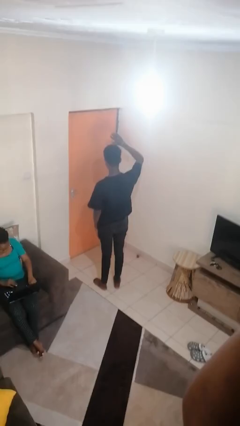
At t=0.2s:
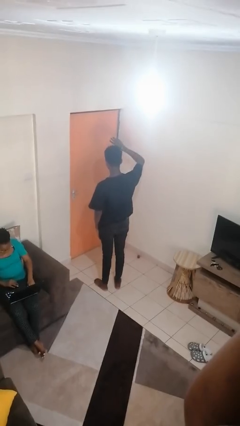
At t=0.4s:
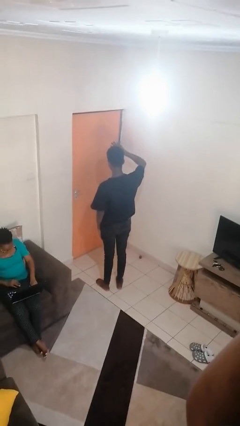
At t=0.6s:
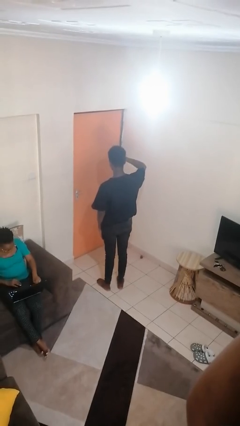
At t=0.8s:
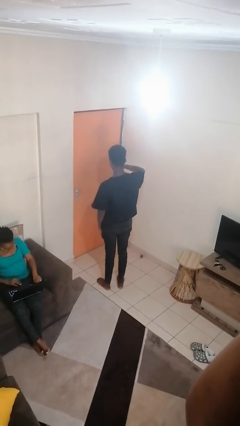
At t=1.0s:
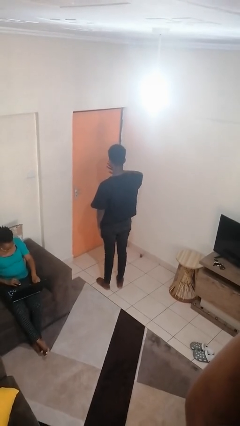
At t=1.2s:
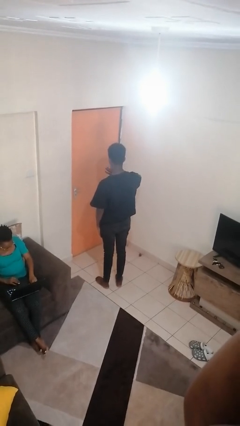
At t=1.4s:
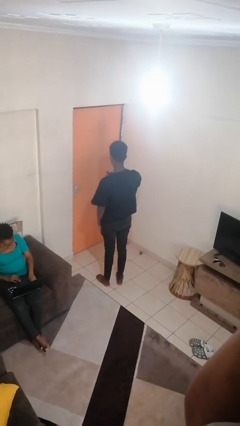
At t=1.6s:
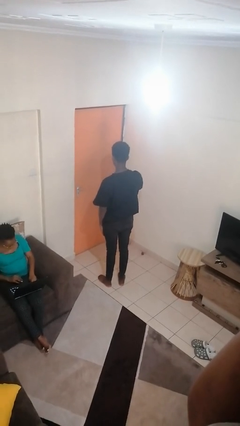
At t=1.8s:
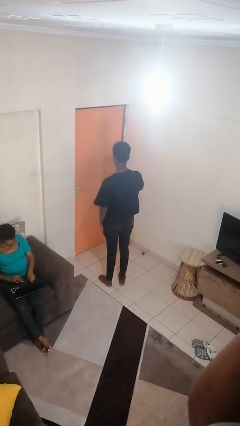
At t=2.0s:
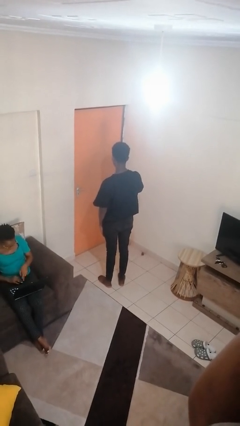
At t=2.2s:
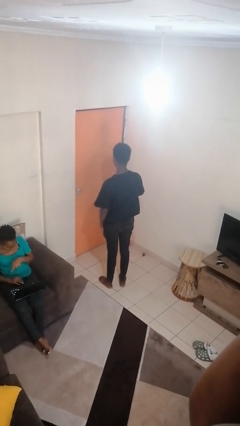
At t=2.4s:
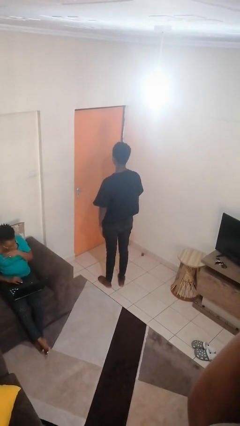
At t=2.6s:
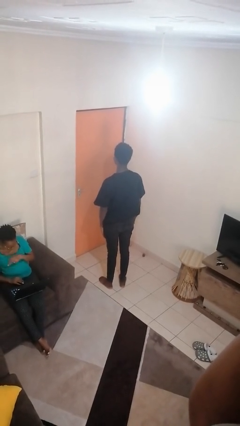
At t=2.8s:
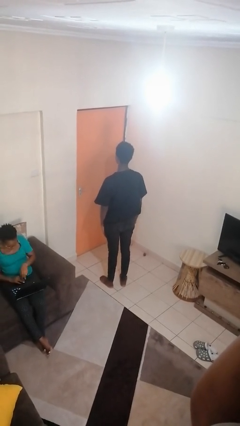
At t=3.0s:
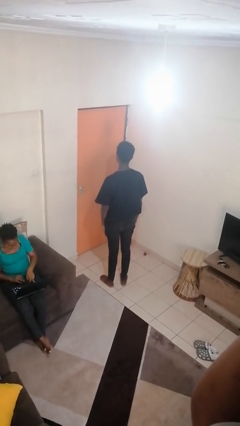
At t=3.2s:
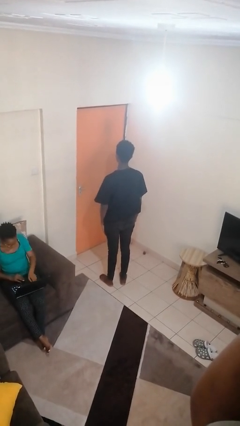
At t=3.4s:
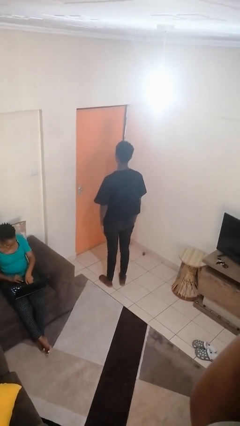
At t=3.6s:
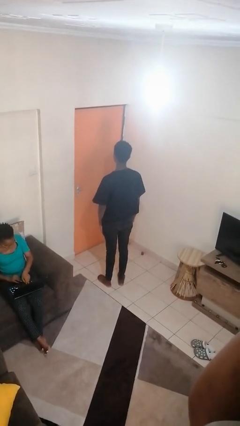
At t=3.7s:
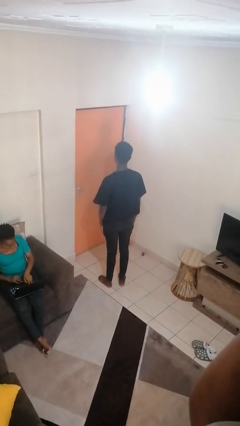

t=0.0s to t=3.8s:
person gestures swipe down

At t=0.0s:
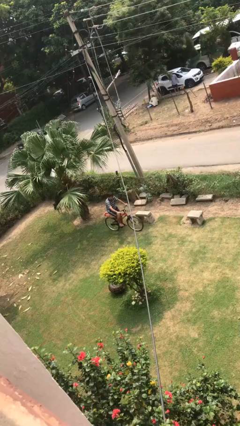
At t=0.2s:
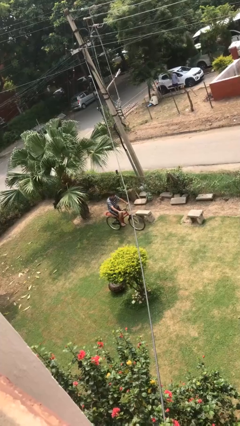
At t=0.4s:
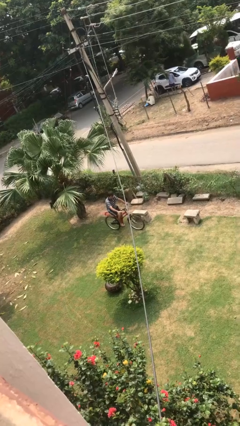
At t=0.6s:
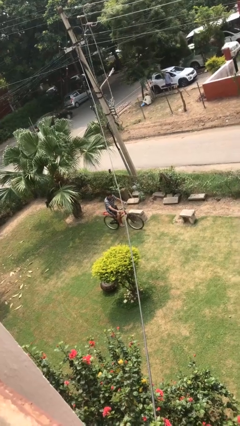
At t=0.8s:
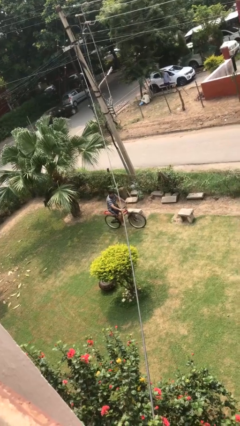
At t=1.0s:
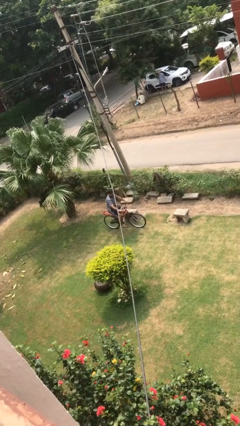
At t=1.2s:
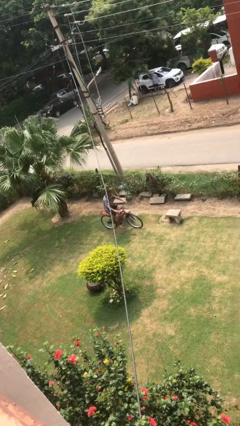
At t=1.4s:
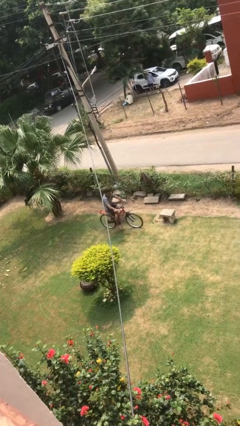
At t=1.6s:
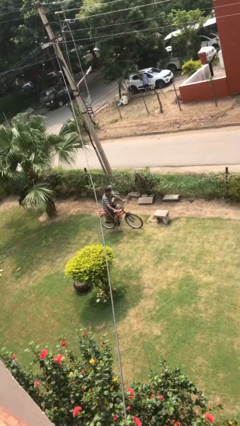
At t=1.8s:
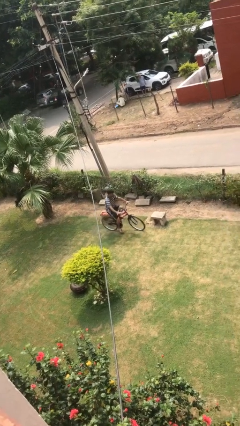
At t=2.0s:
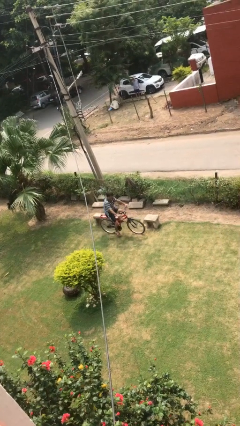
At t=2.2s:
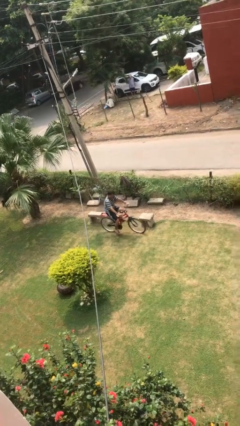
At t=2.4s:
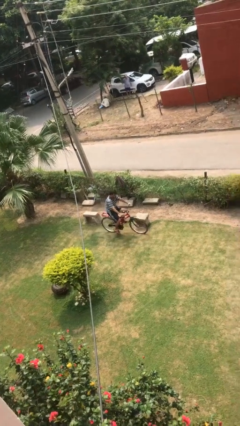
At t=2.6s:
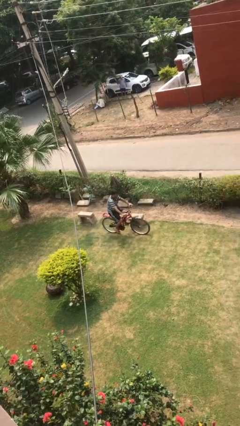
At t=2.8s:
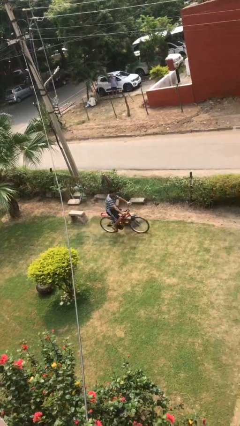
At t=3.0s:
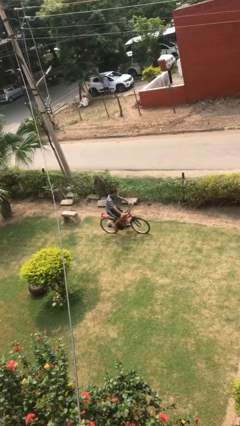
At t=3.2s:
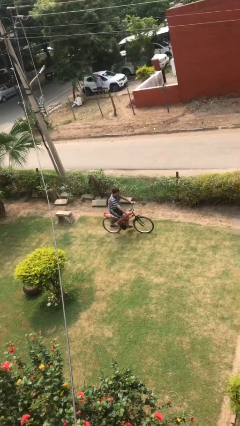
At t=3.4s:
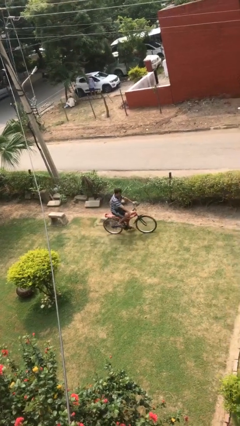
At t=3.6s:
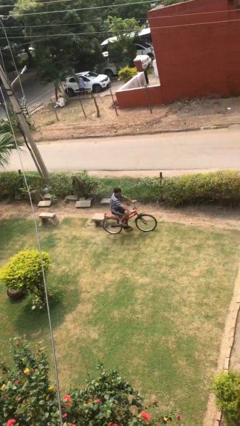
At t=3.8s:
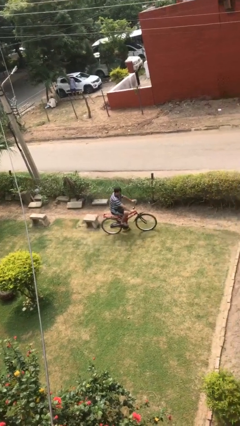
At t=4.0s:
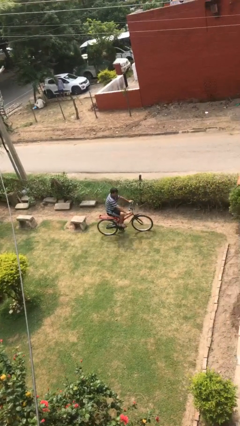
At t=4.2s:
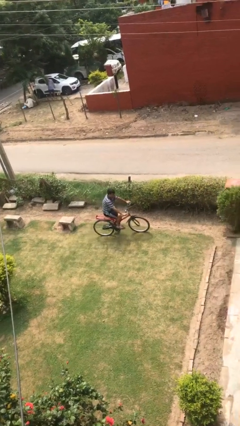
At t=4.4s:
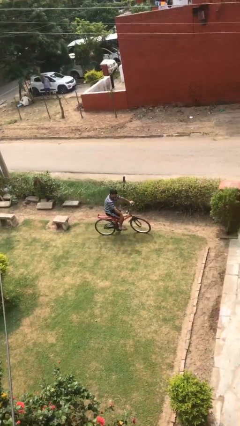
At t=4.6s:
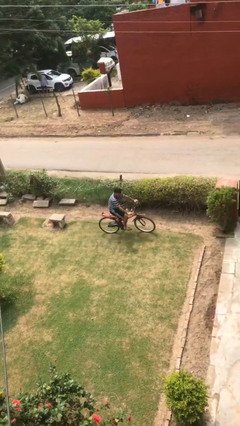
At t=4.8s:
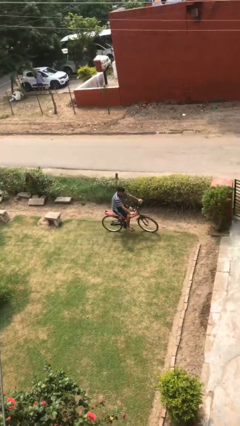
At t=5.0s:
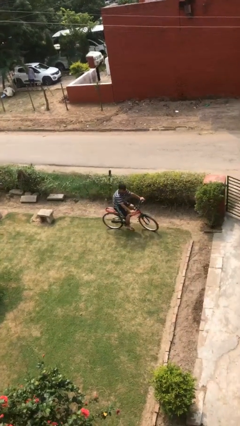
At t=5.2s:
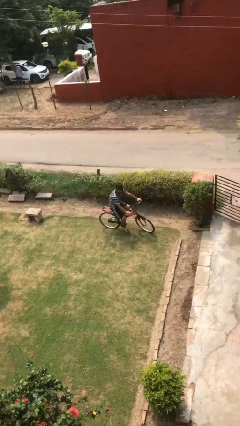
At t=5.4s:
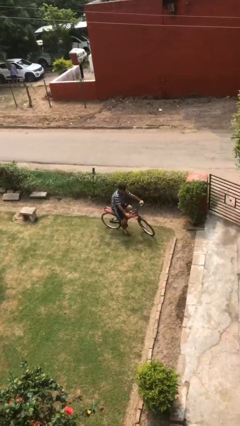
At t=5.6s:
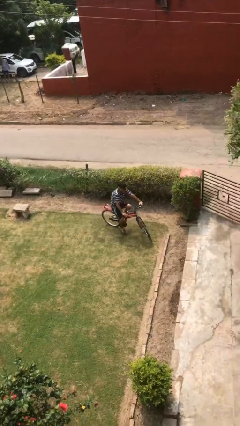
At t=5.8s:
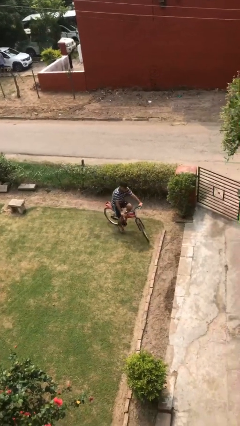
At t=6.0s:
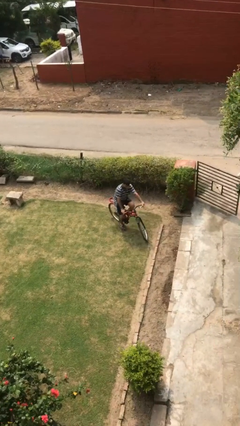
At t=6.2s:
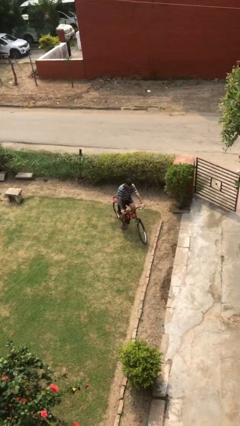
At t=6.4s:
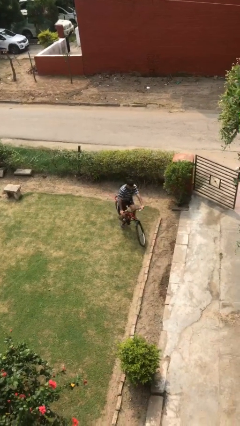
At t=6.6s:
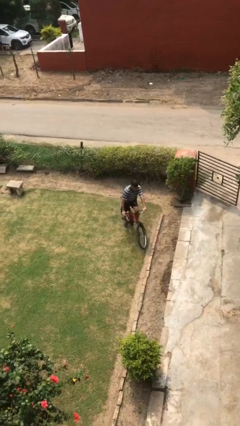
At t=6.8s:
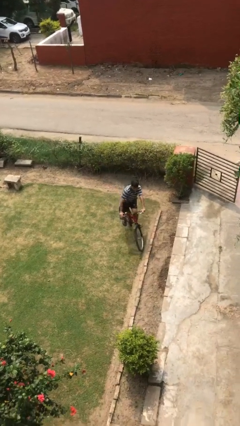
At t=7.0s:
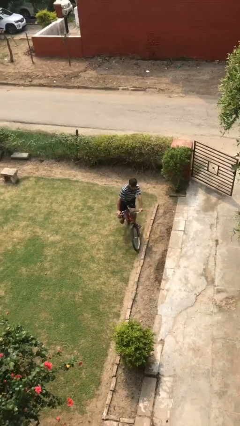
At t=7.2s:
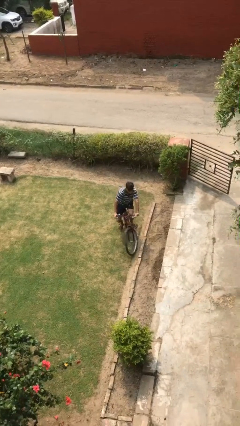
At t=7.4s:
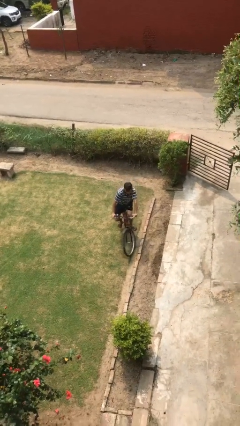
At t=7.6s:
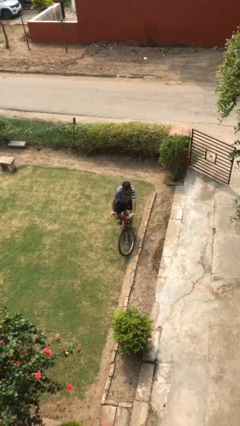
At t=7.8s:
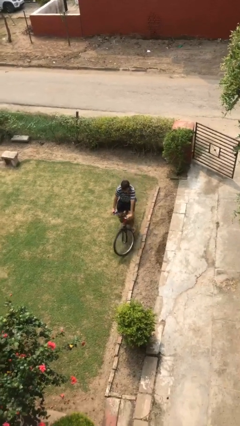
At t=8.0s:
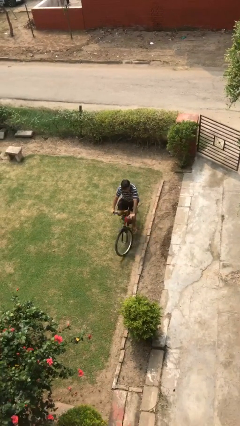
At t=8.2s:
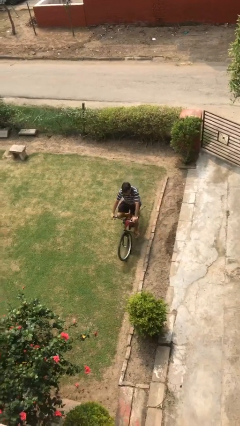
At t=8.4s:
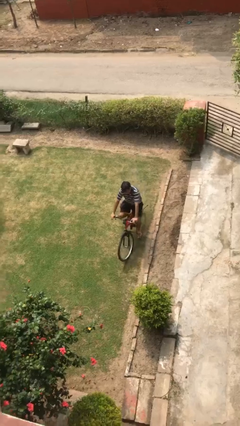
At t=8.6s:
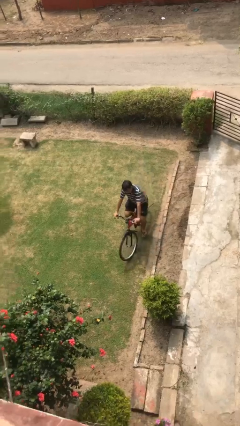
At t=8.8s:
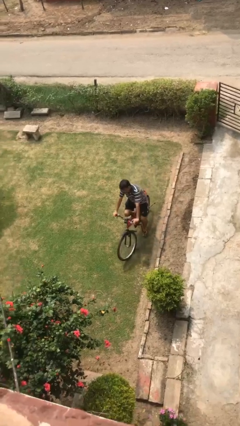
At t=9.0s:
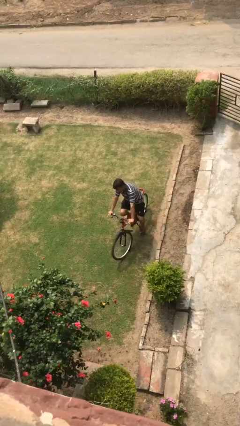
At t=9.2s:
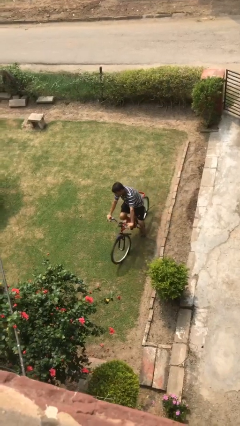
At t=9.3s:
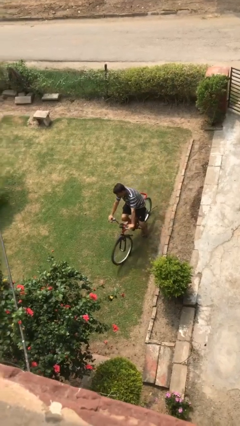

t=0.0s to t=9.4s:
person rides bicycle

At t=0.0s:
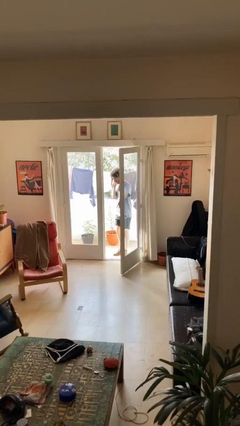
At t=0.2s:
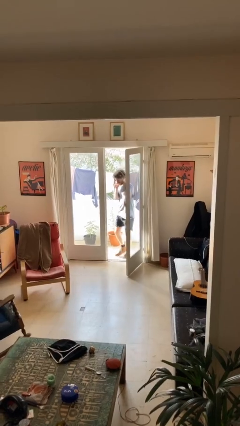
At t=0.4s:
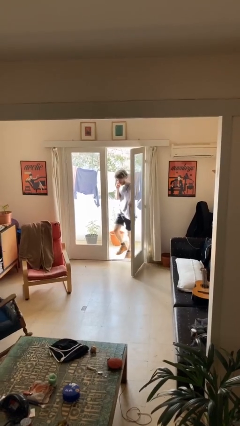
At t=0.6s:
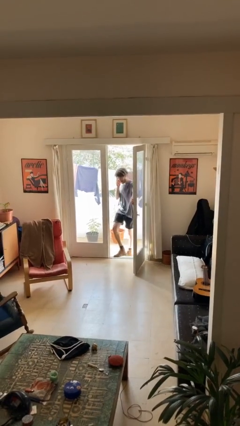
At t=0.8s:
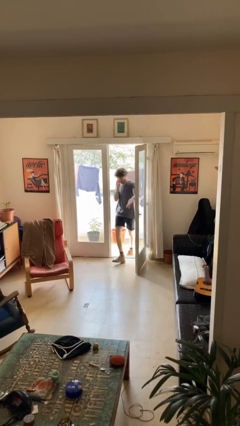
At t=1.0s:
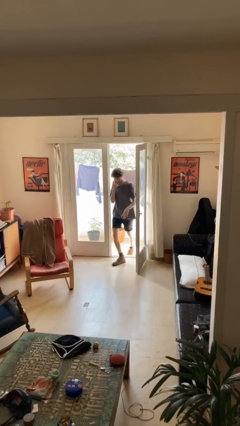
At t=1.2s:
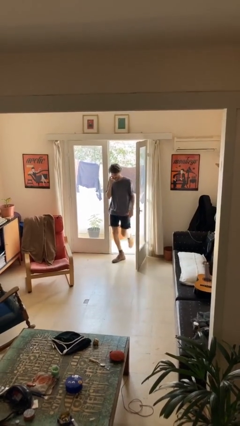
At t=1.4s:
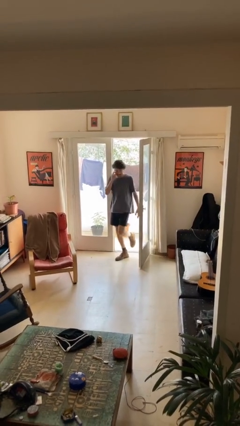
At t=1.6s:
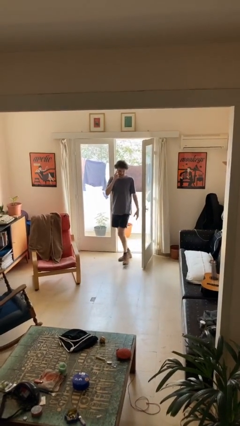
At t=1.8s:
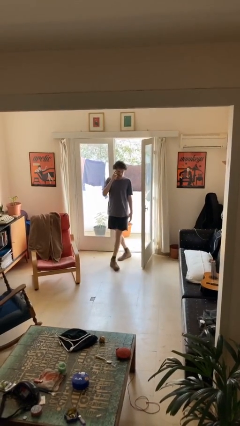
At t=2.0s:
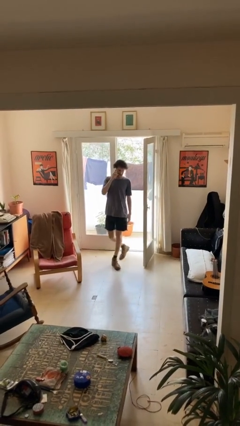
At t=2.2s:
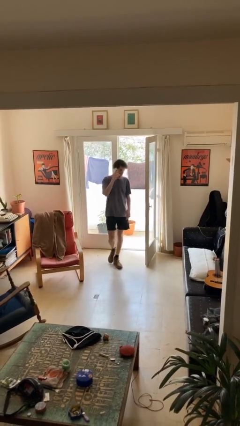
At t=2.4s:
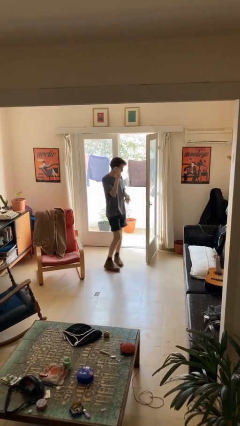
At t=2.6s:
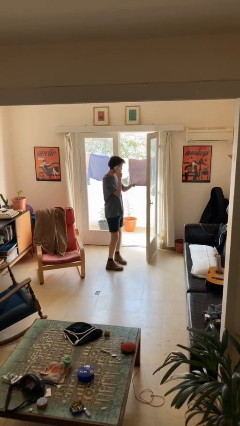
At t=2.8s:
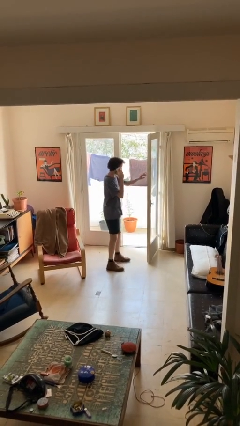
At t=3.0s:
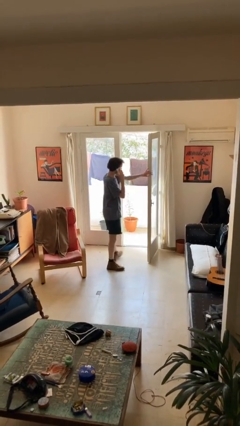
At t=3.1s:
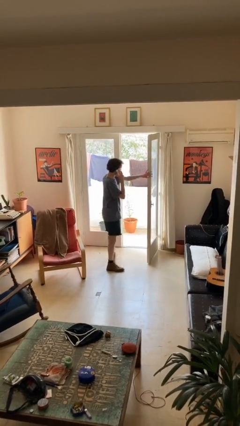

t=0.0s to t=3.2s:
person enters scene through structure

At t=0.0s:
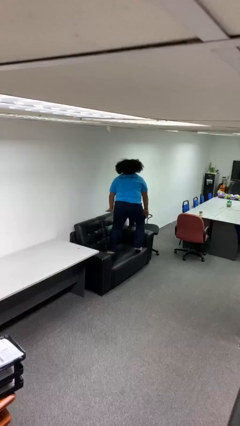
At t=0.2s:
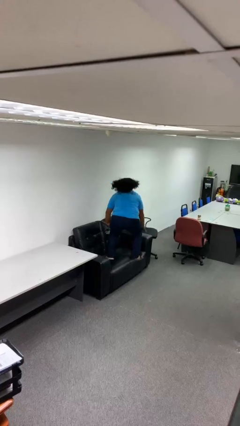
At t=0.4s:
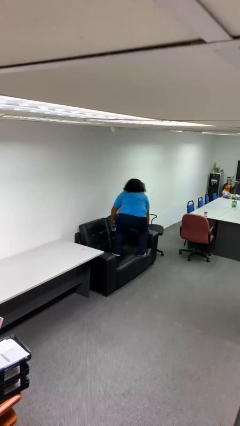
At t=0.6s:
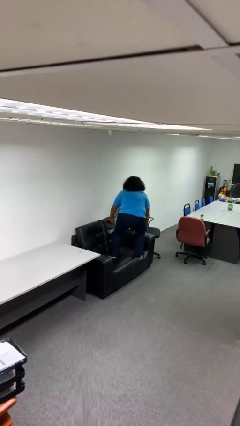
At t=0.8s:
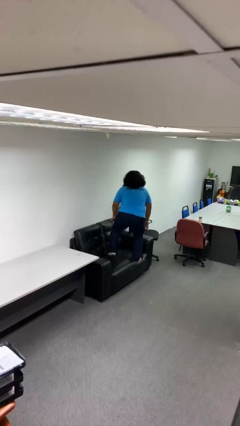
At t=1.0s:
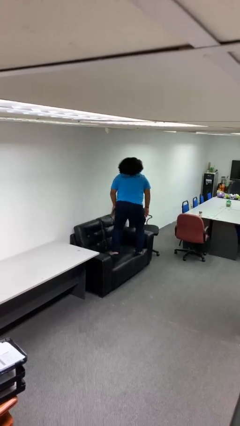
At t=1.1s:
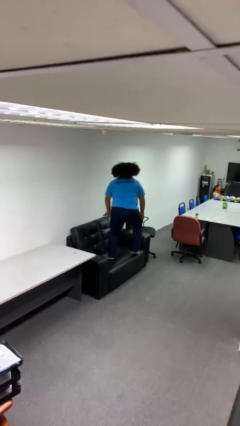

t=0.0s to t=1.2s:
person jumps on couch
